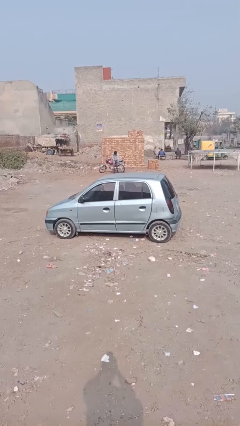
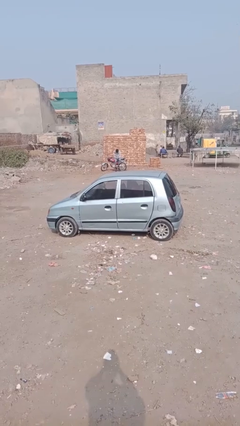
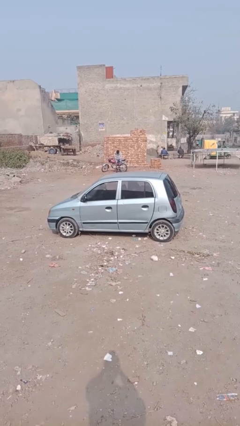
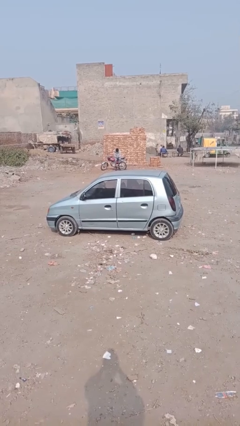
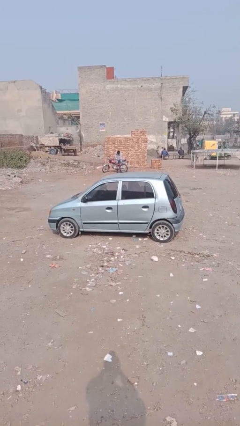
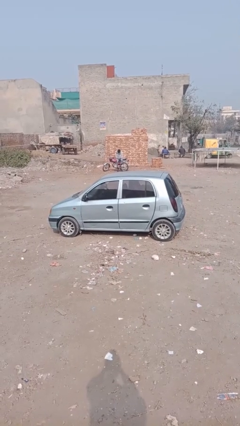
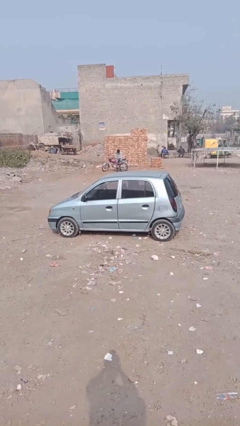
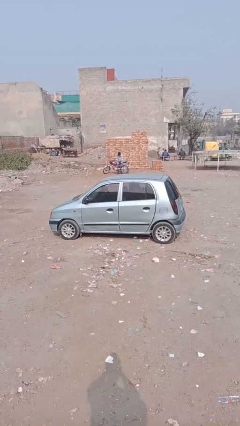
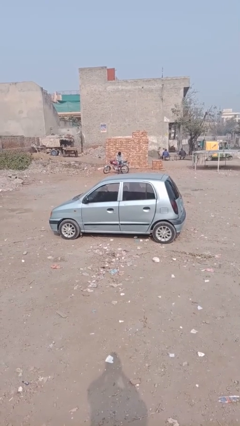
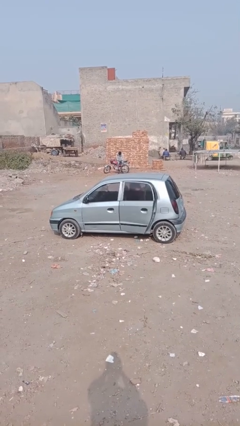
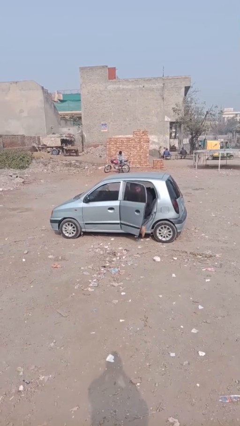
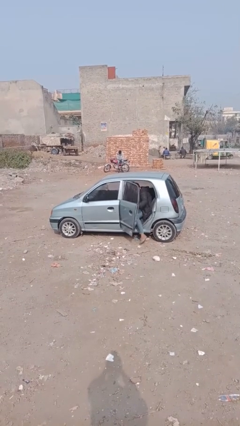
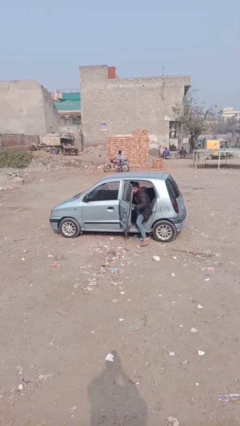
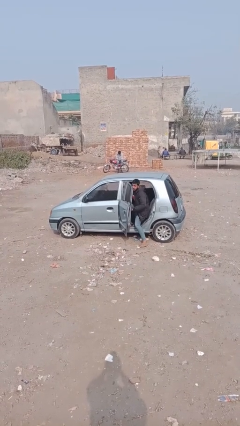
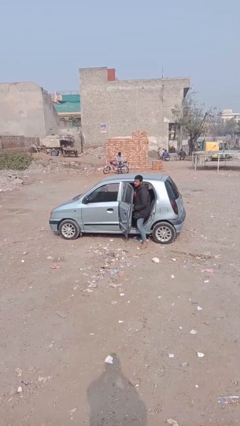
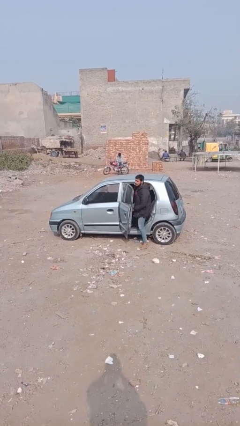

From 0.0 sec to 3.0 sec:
car drops off person

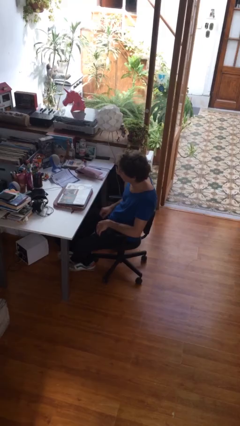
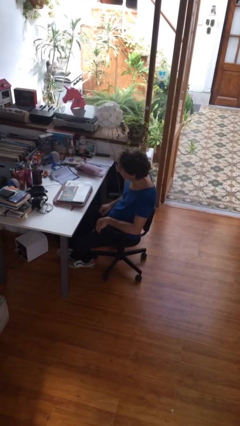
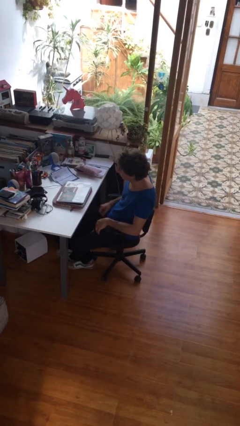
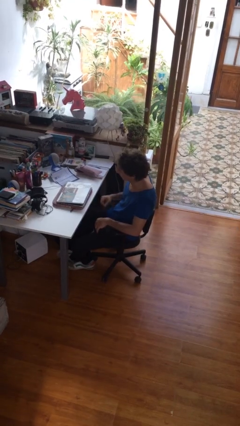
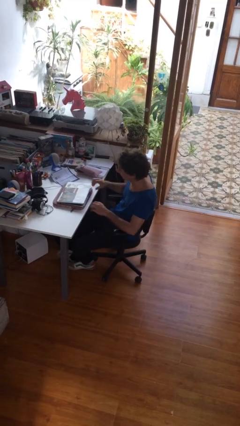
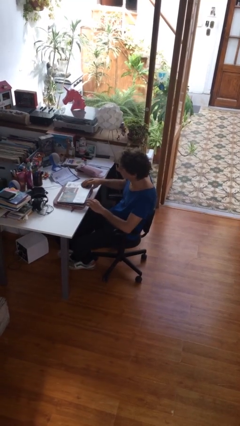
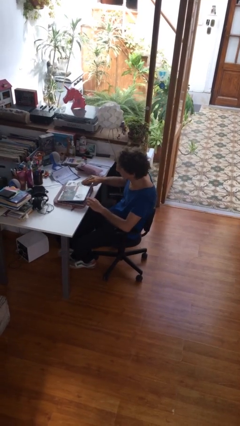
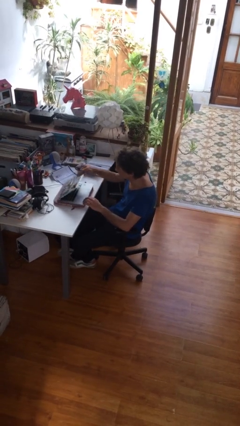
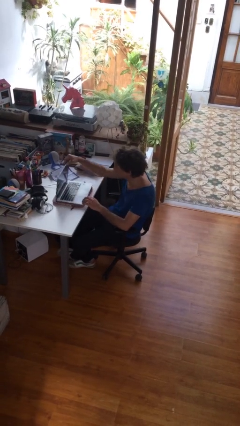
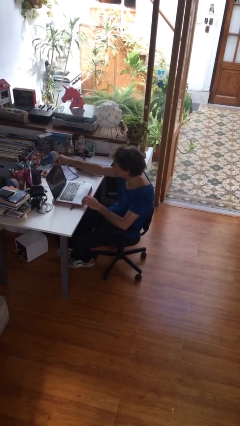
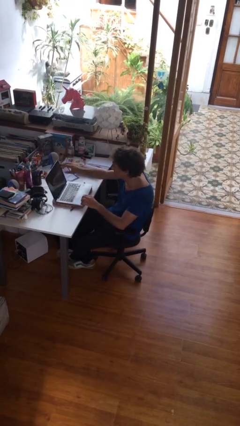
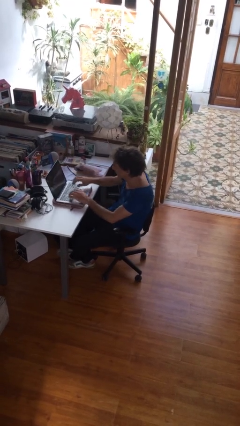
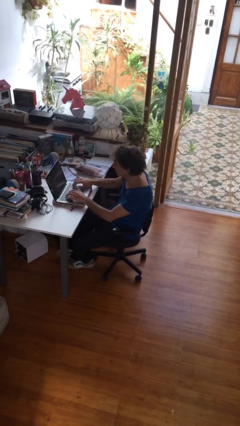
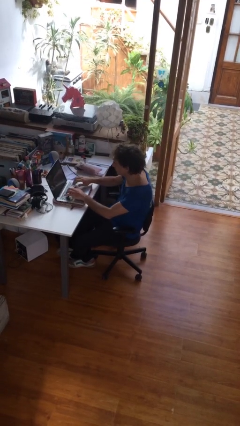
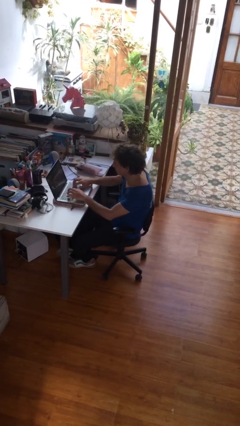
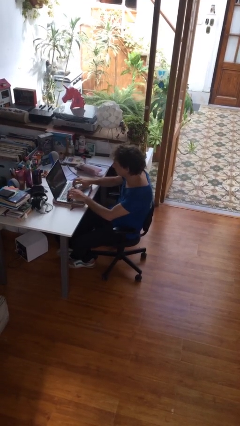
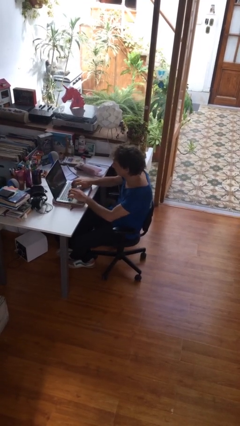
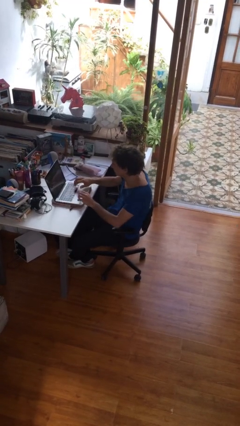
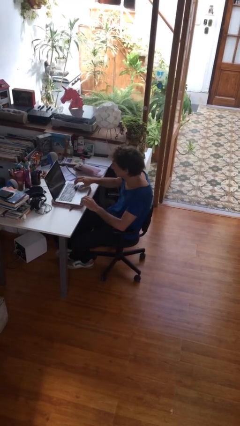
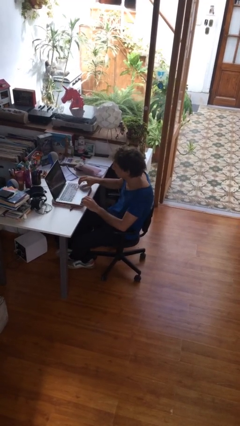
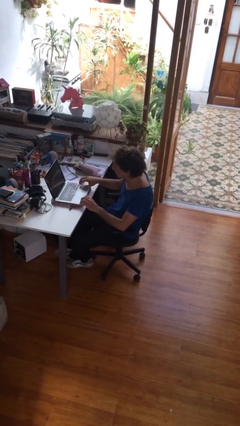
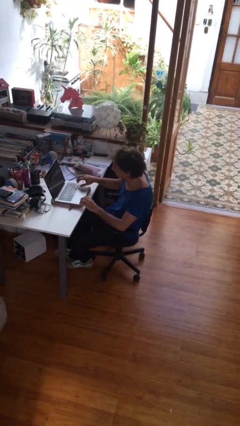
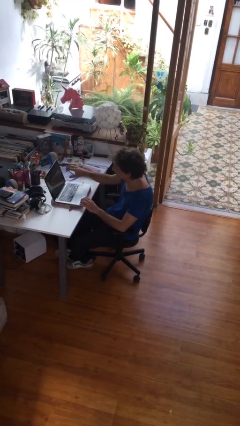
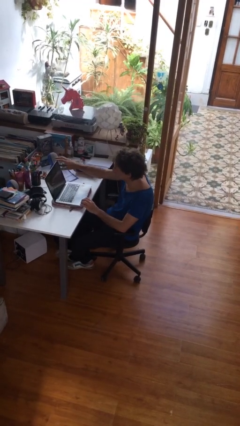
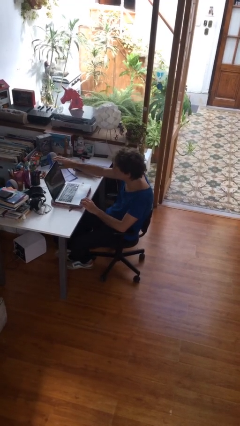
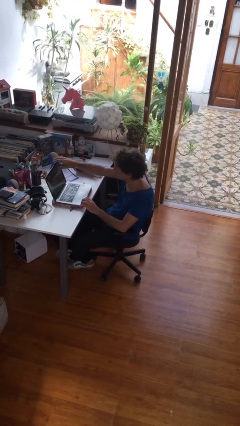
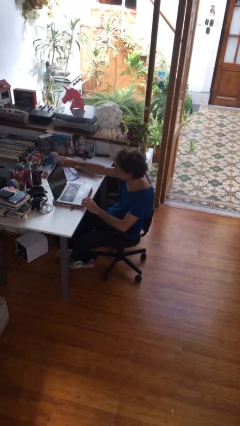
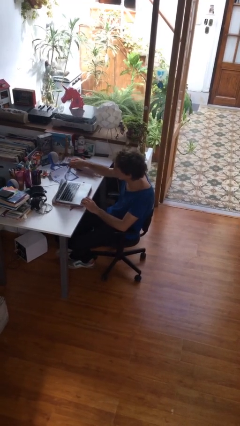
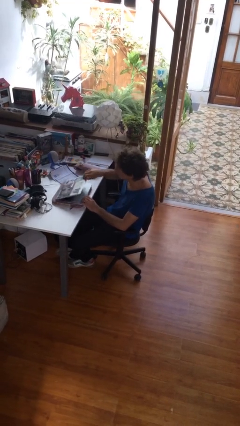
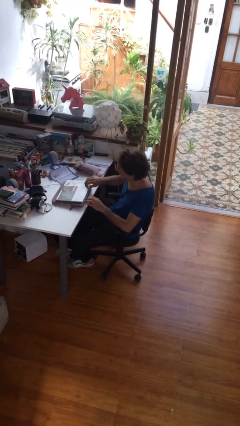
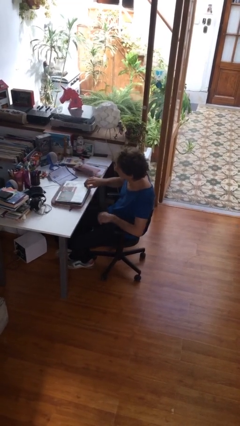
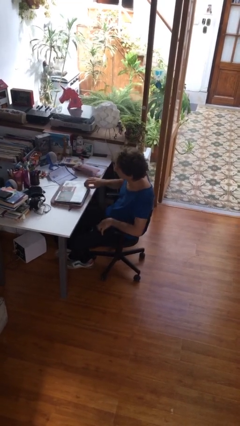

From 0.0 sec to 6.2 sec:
person interacts with laptop

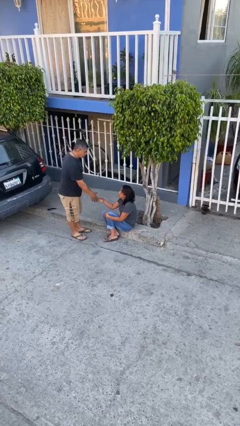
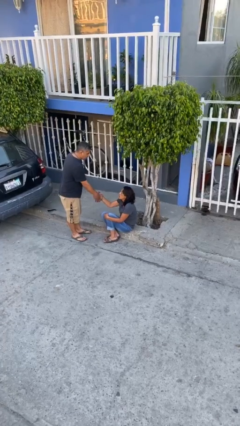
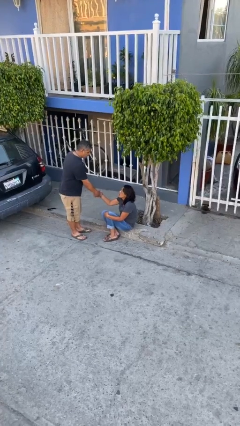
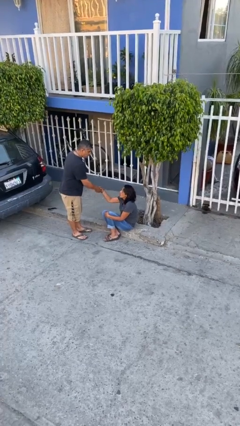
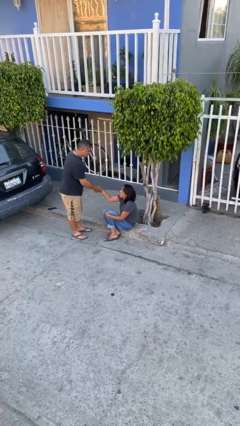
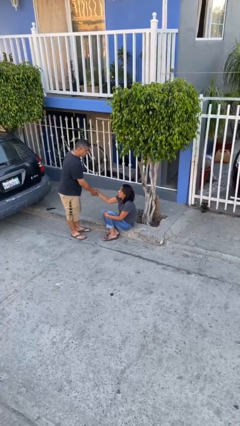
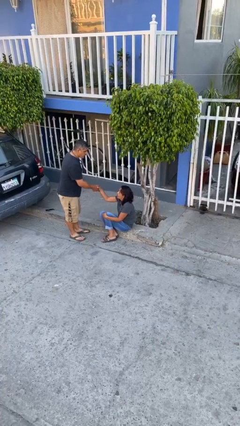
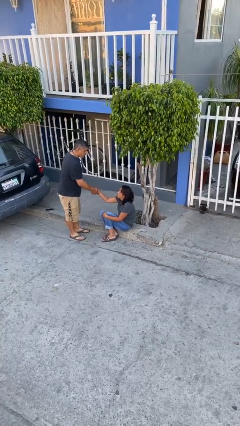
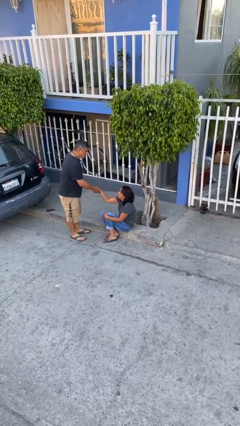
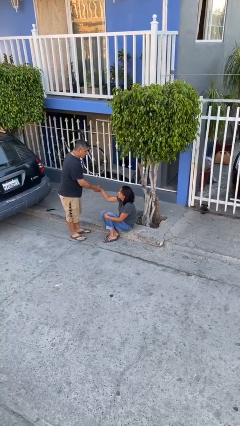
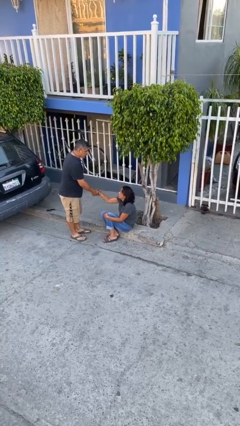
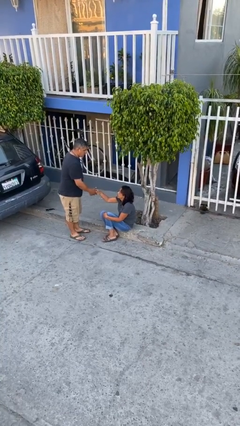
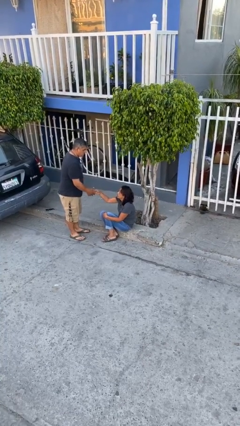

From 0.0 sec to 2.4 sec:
person shakes hand

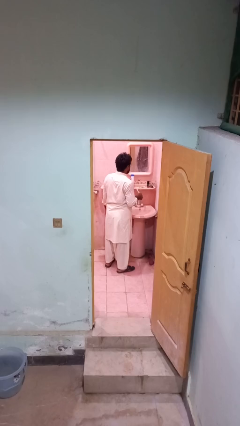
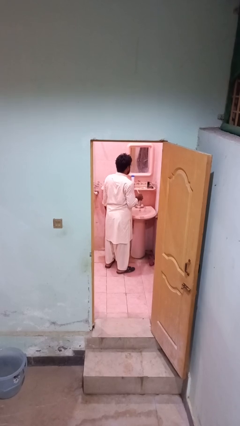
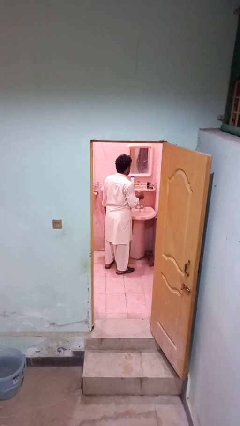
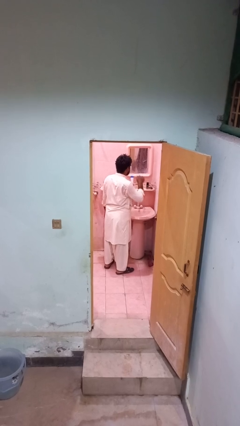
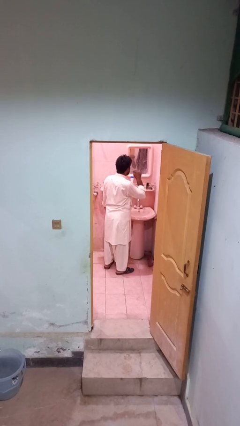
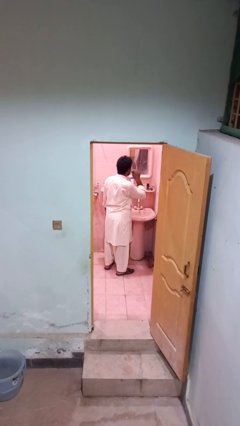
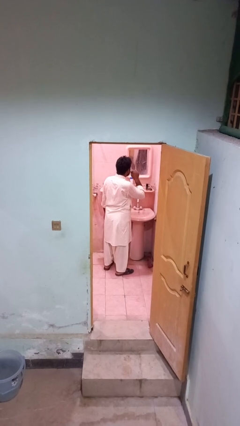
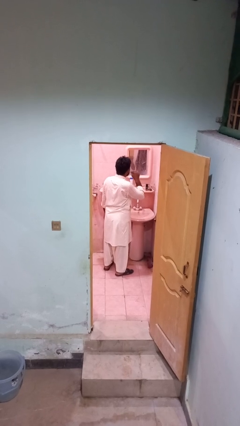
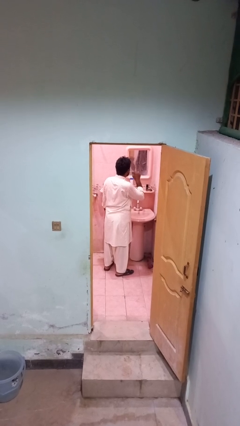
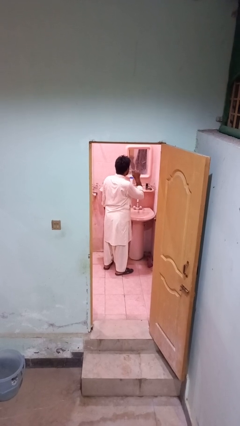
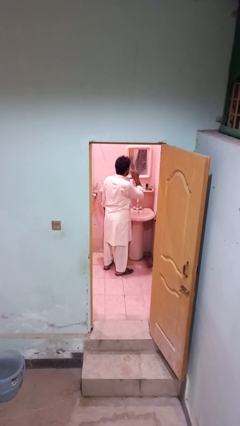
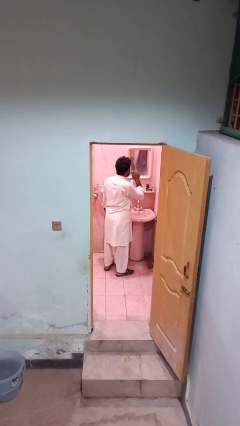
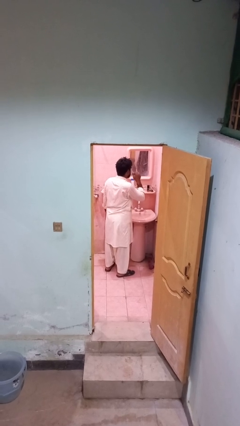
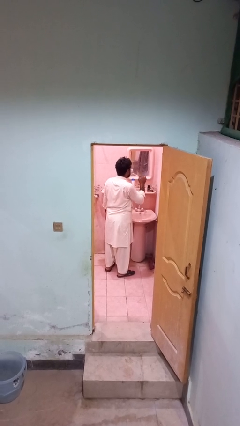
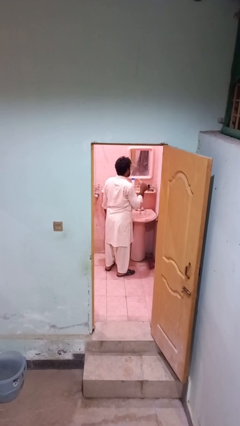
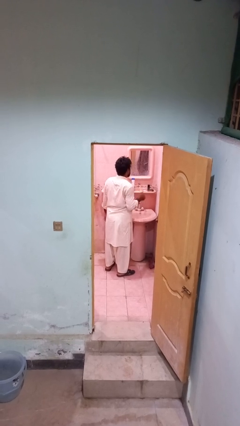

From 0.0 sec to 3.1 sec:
person brushes teeth

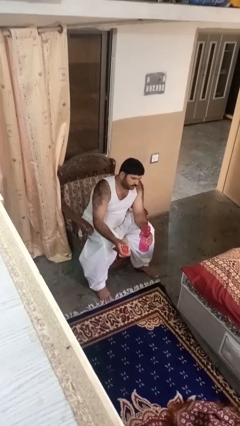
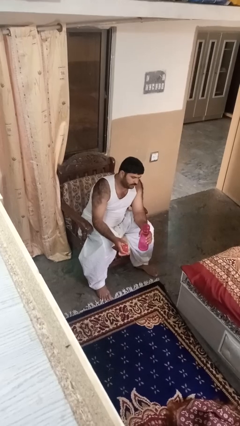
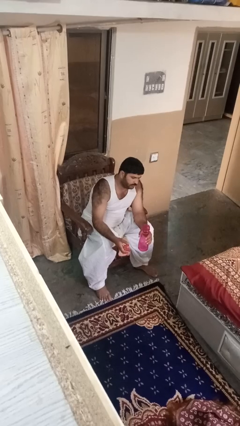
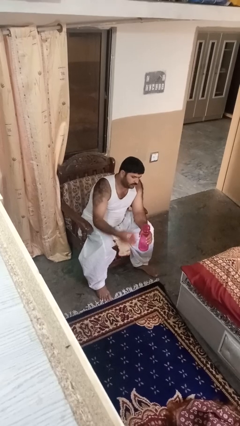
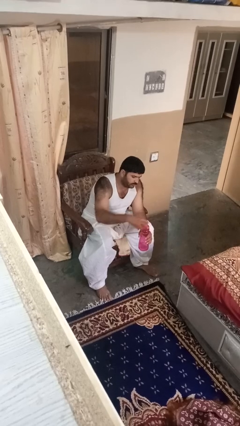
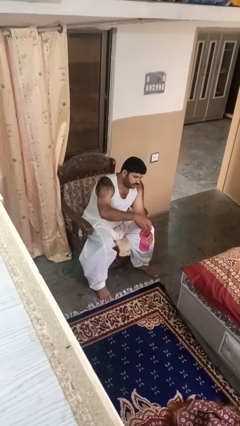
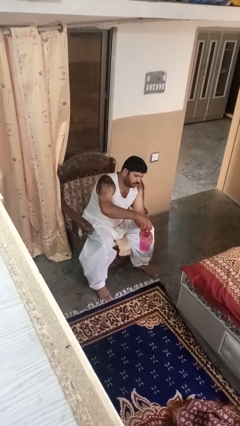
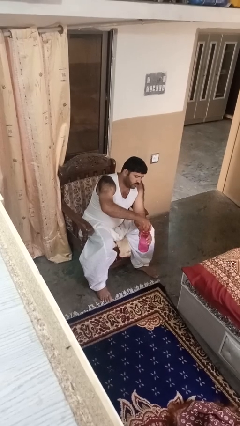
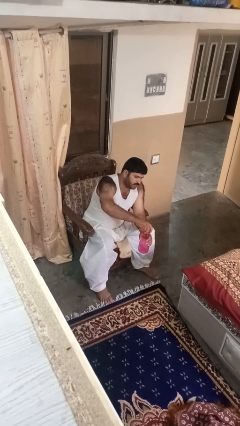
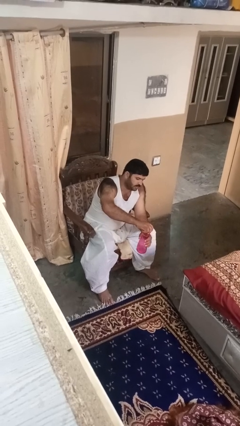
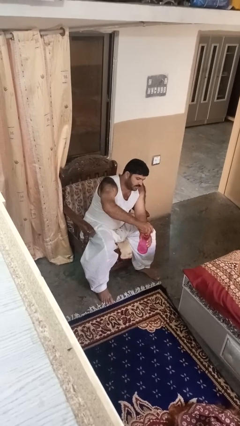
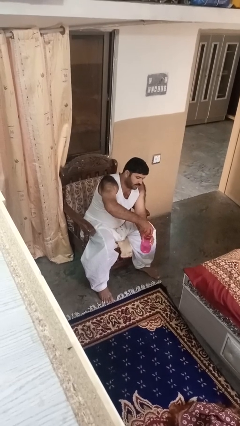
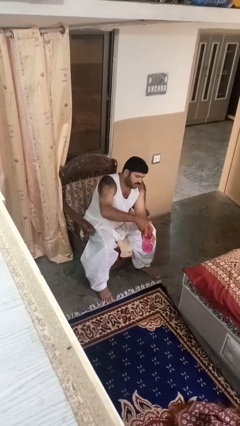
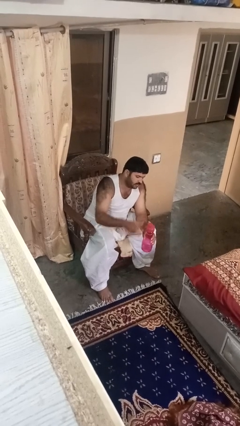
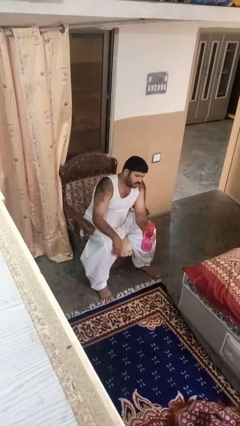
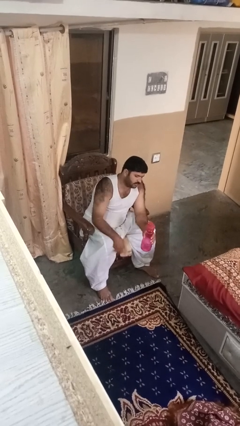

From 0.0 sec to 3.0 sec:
person screws lid to bottle
